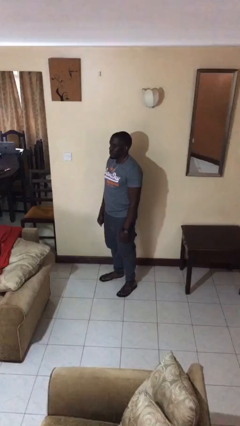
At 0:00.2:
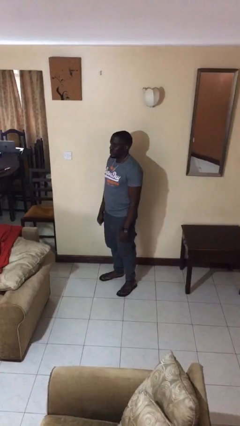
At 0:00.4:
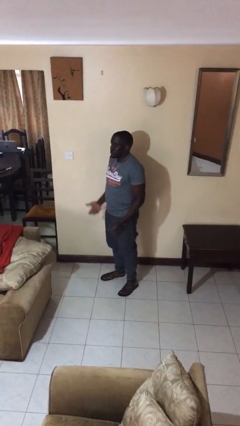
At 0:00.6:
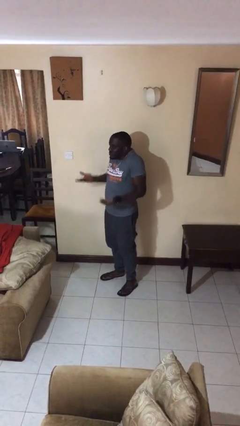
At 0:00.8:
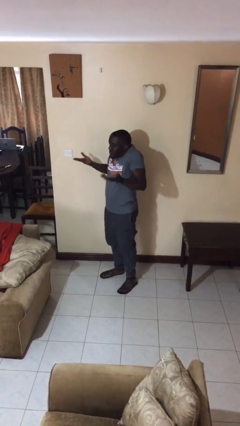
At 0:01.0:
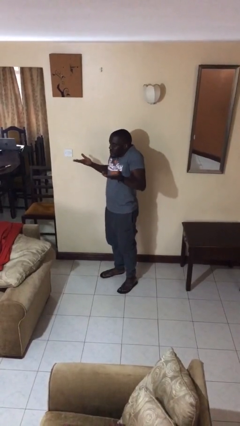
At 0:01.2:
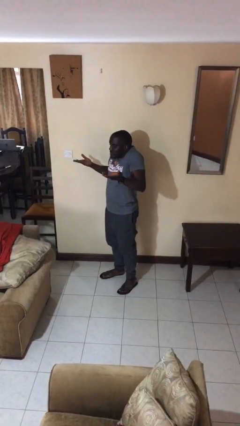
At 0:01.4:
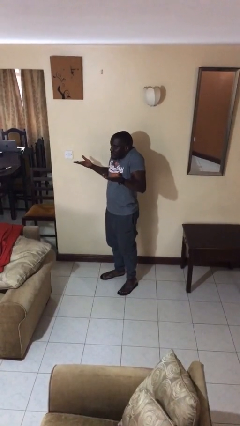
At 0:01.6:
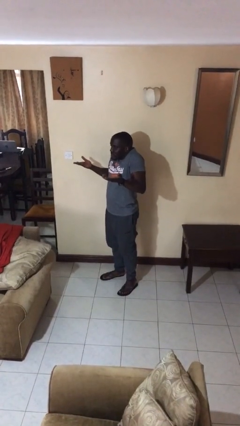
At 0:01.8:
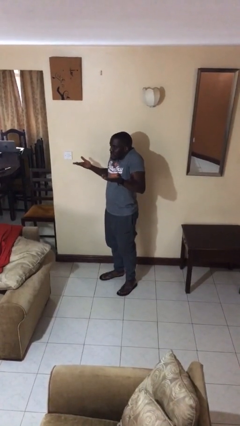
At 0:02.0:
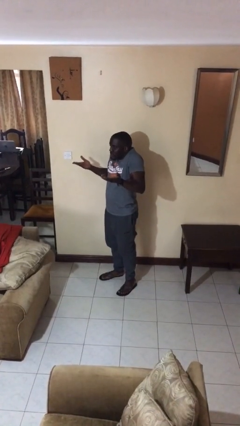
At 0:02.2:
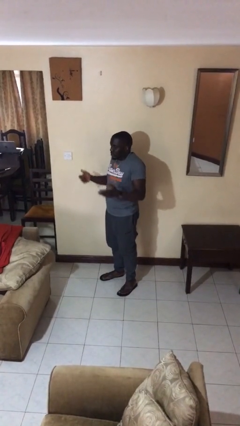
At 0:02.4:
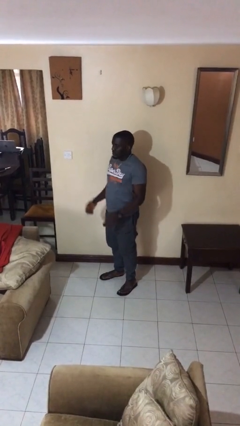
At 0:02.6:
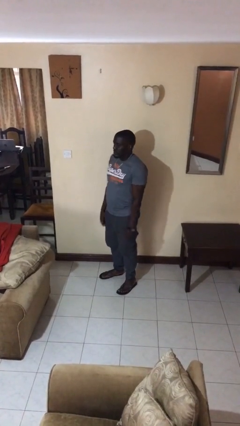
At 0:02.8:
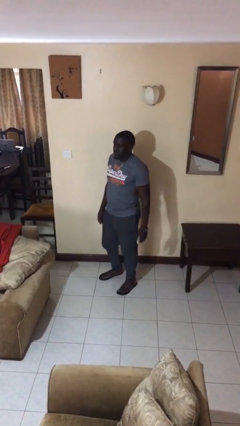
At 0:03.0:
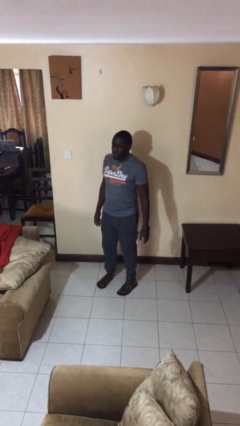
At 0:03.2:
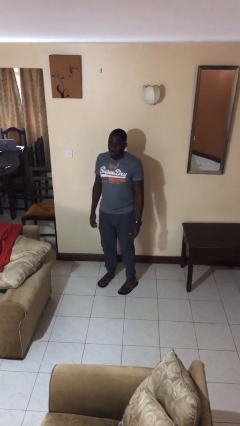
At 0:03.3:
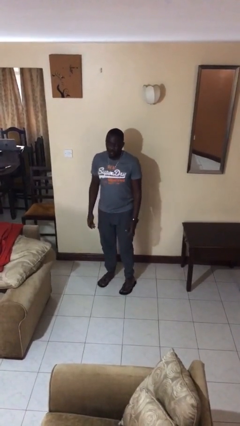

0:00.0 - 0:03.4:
person shrugs

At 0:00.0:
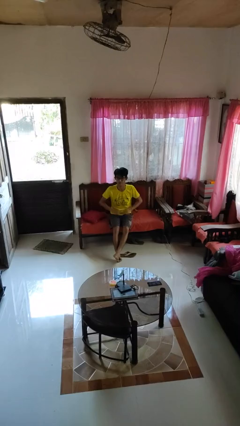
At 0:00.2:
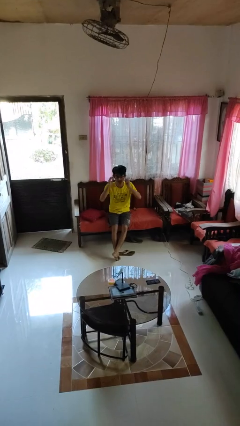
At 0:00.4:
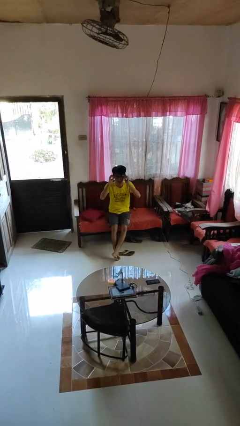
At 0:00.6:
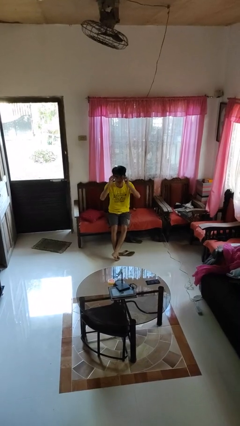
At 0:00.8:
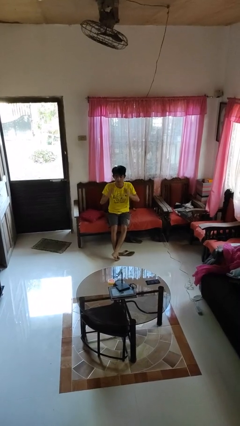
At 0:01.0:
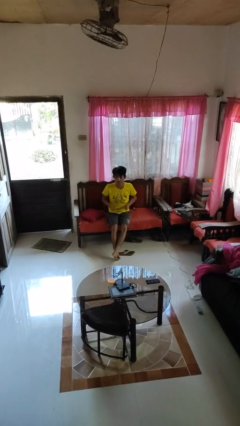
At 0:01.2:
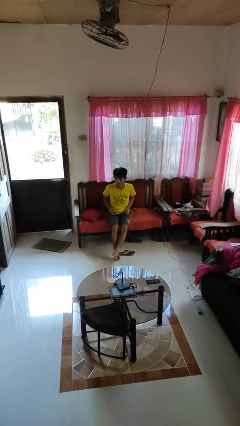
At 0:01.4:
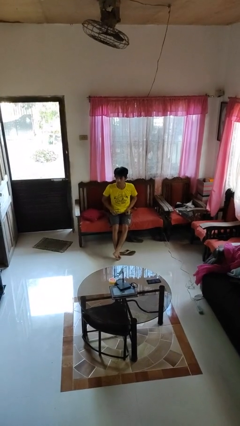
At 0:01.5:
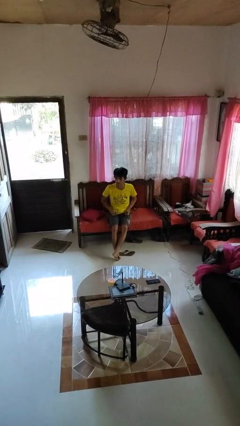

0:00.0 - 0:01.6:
person takes off glasses

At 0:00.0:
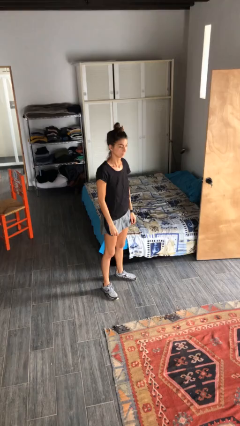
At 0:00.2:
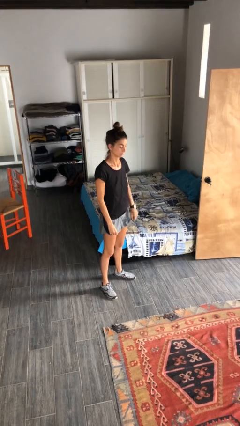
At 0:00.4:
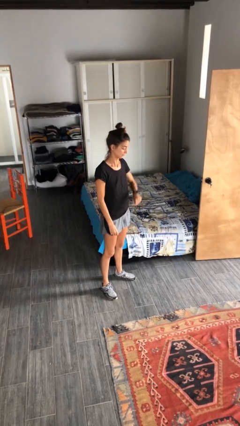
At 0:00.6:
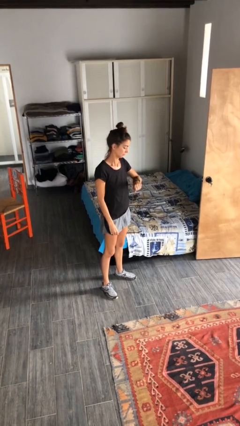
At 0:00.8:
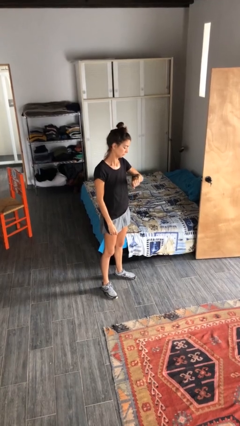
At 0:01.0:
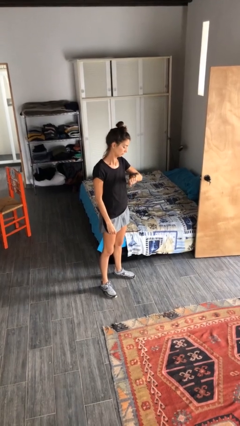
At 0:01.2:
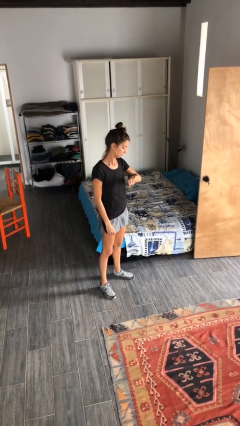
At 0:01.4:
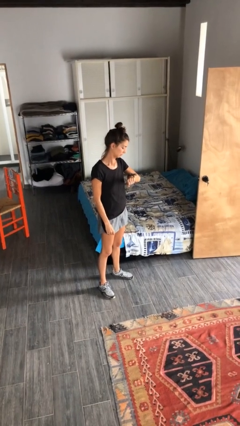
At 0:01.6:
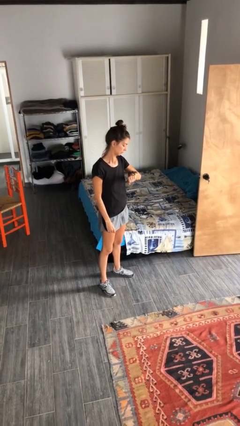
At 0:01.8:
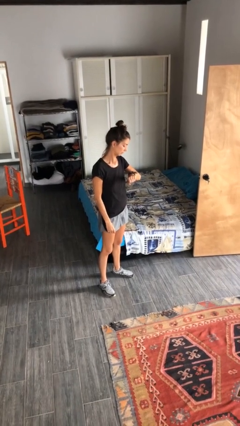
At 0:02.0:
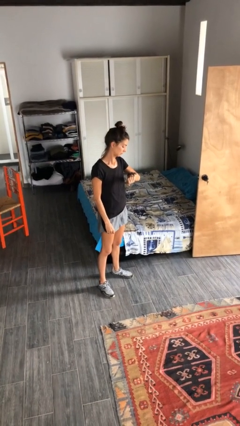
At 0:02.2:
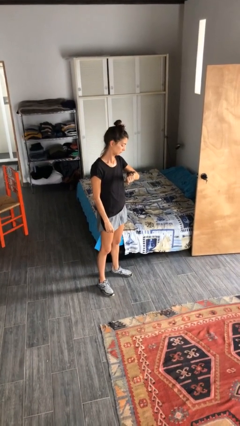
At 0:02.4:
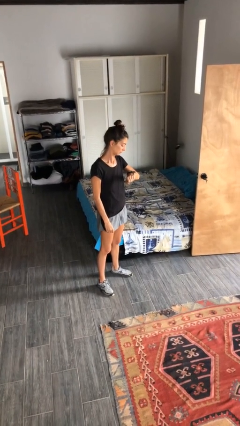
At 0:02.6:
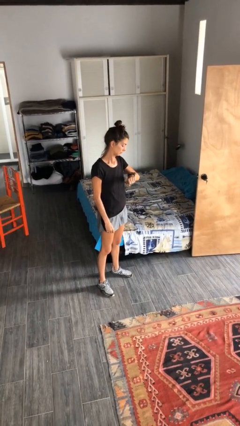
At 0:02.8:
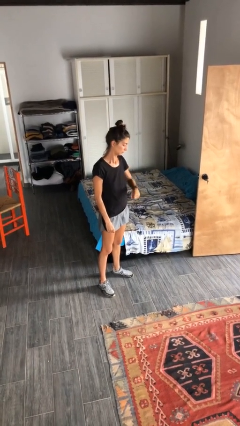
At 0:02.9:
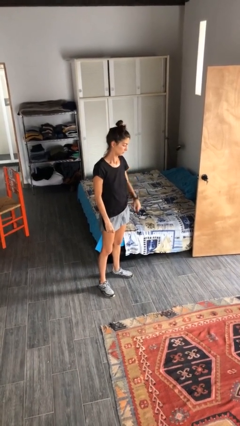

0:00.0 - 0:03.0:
person looks at wristwatch

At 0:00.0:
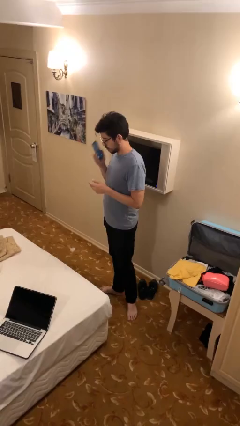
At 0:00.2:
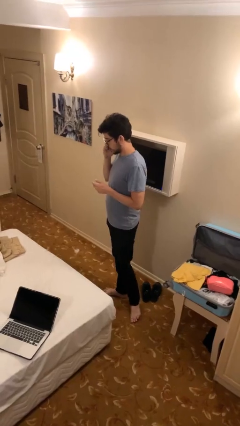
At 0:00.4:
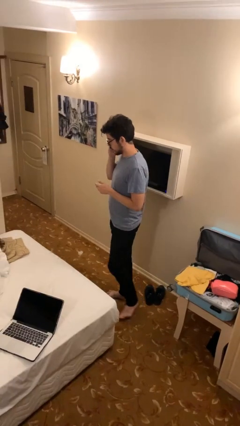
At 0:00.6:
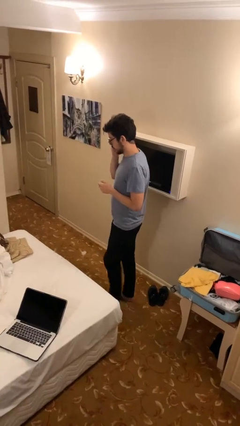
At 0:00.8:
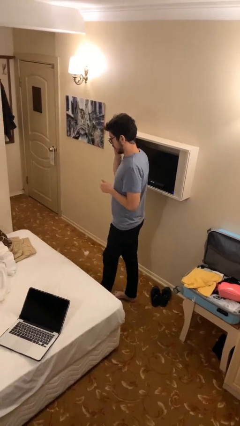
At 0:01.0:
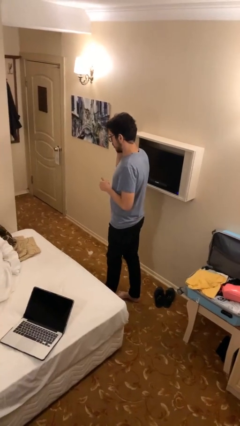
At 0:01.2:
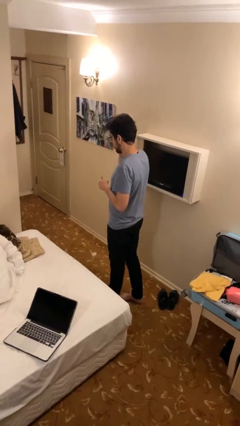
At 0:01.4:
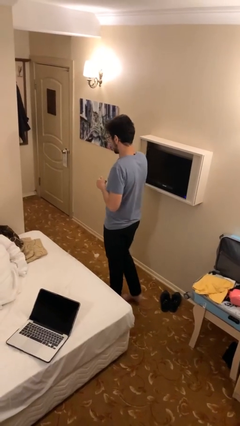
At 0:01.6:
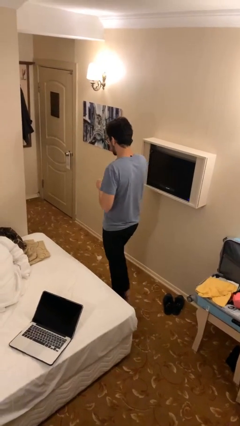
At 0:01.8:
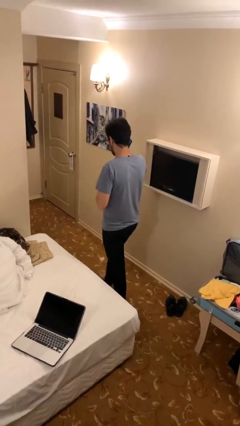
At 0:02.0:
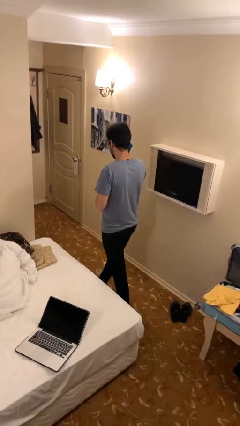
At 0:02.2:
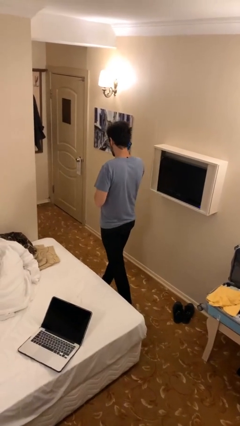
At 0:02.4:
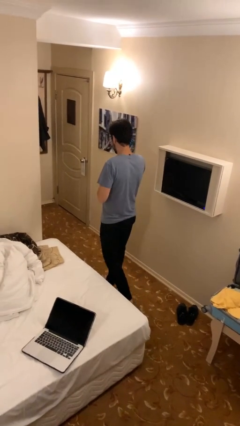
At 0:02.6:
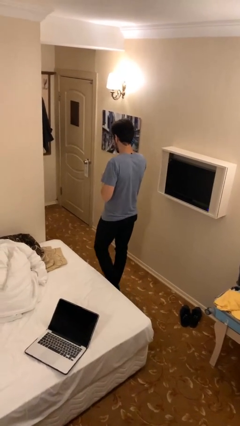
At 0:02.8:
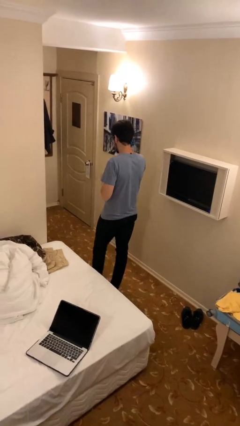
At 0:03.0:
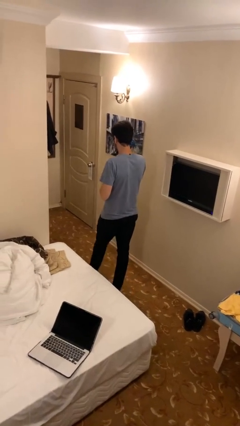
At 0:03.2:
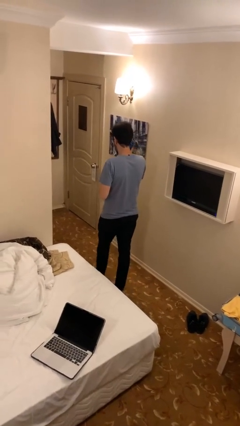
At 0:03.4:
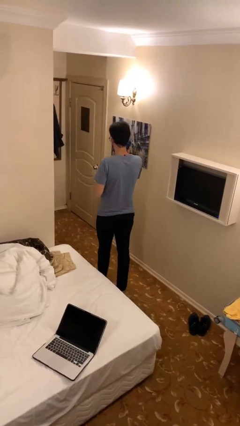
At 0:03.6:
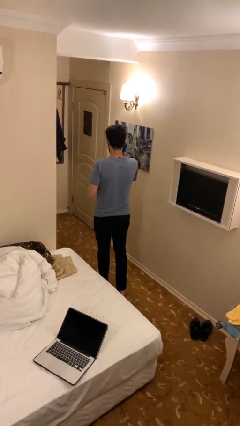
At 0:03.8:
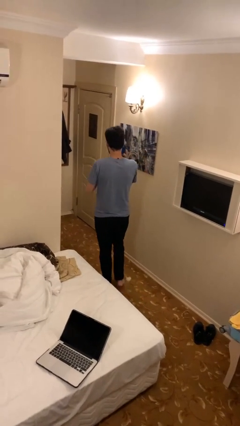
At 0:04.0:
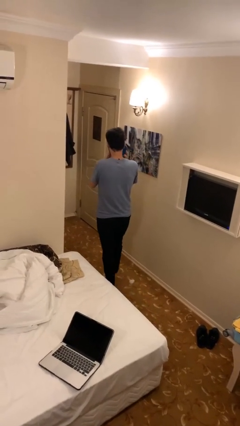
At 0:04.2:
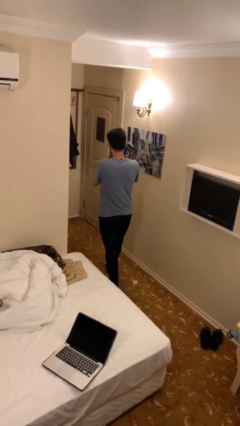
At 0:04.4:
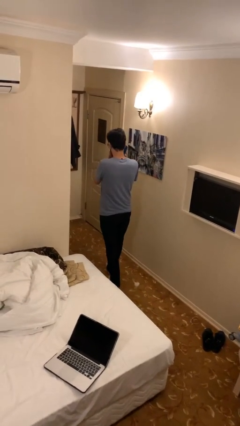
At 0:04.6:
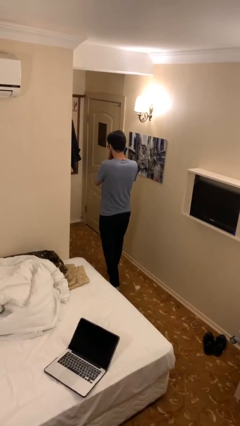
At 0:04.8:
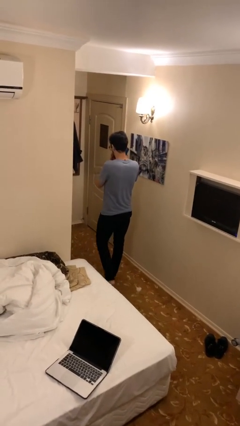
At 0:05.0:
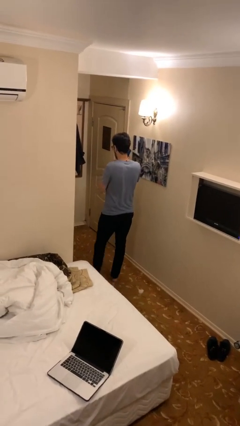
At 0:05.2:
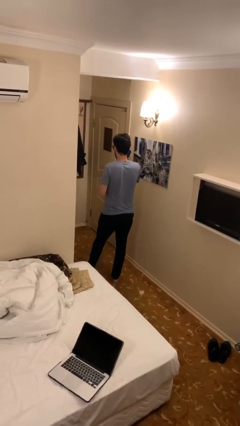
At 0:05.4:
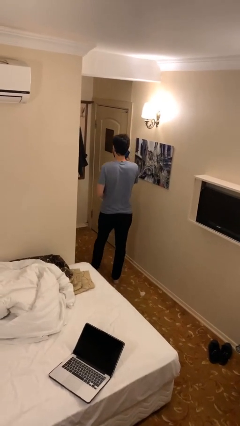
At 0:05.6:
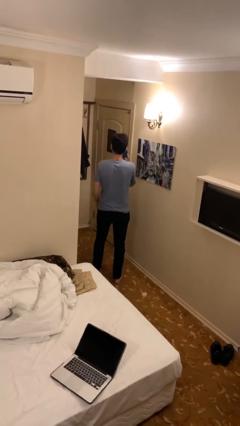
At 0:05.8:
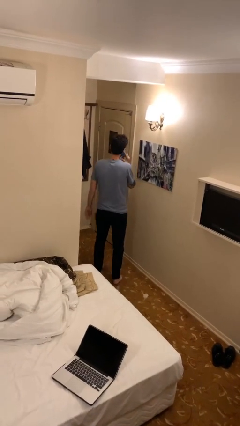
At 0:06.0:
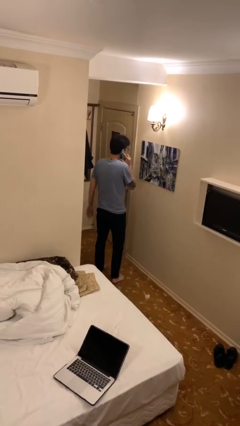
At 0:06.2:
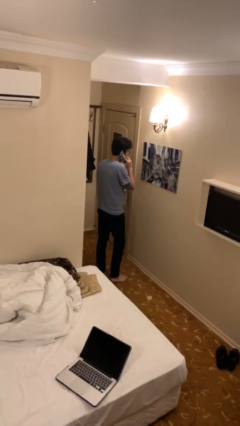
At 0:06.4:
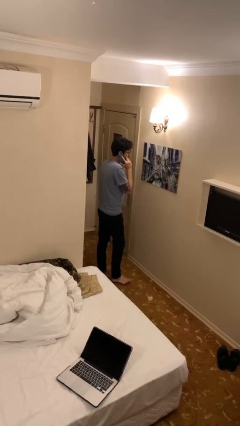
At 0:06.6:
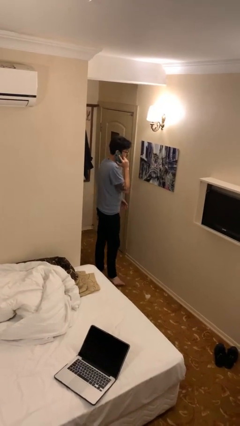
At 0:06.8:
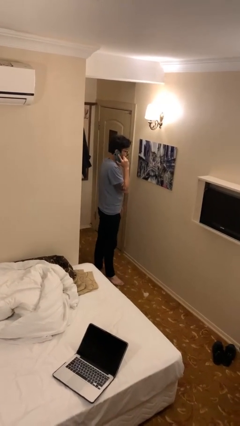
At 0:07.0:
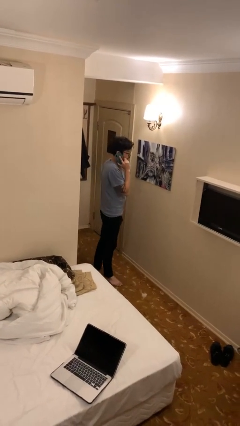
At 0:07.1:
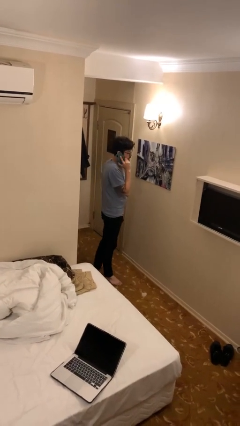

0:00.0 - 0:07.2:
person talks on phone

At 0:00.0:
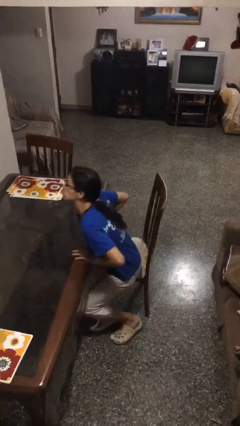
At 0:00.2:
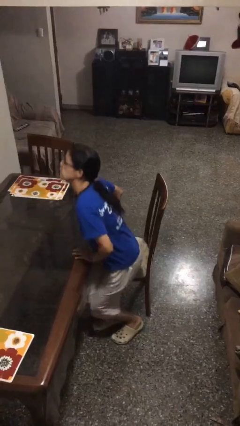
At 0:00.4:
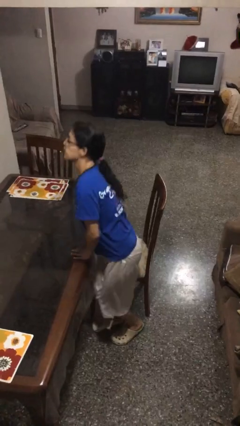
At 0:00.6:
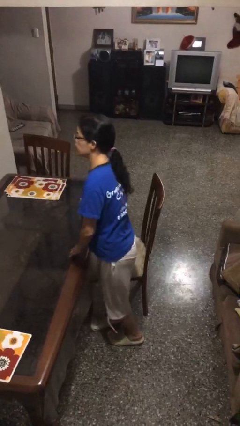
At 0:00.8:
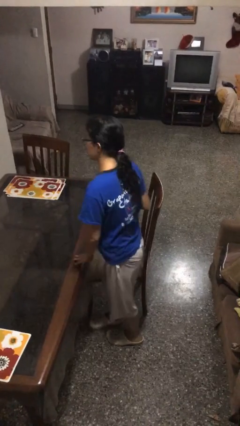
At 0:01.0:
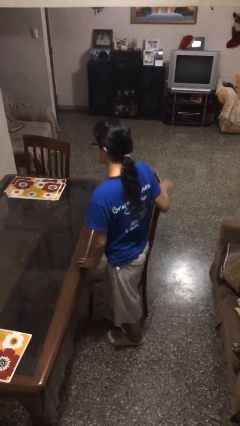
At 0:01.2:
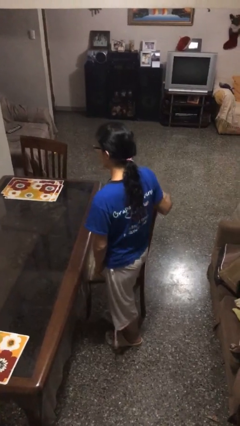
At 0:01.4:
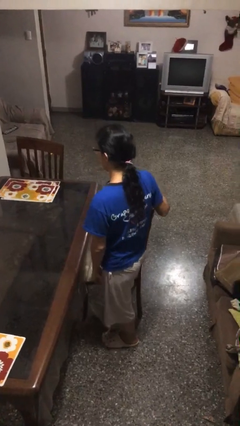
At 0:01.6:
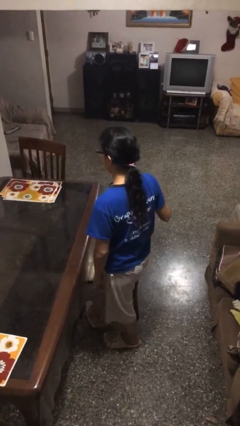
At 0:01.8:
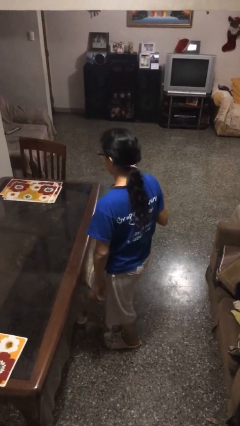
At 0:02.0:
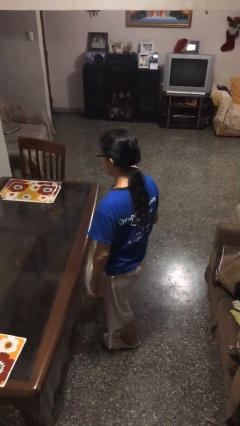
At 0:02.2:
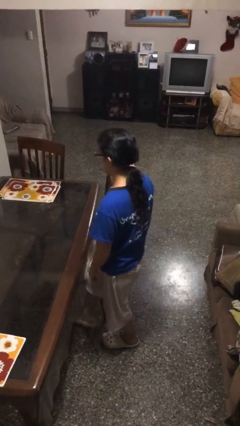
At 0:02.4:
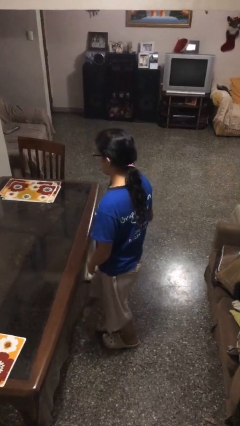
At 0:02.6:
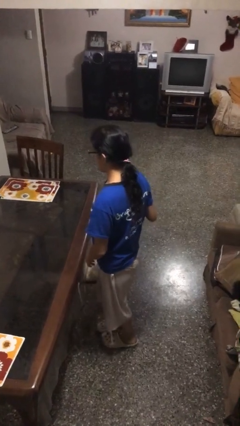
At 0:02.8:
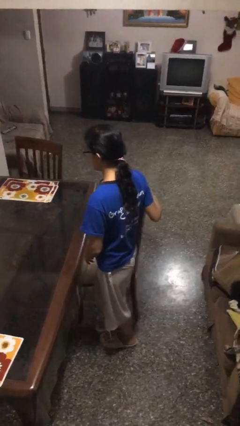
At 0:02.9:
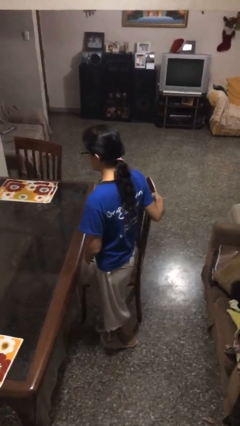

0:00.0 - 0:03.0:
person stands up
